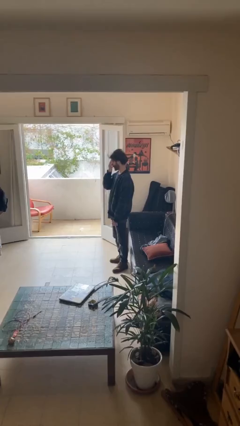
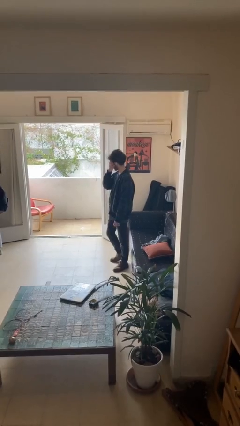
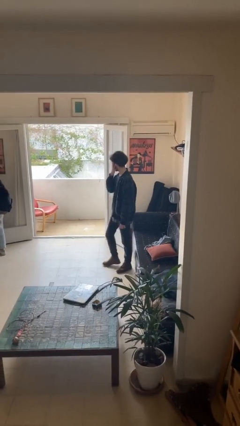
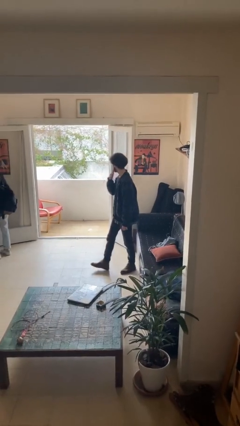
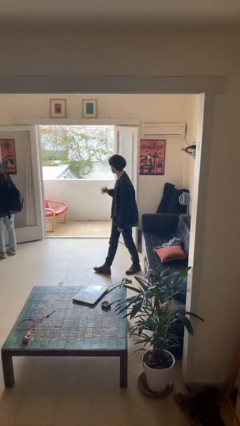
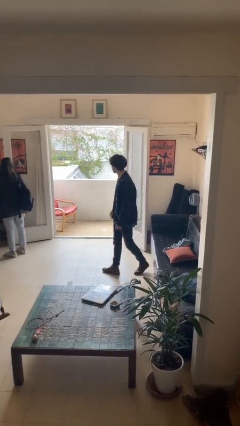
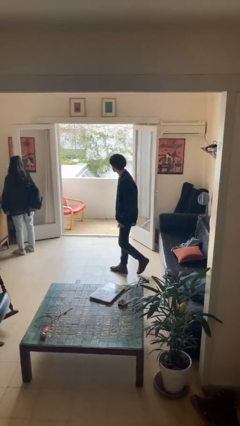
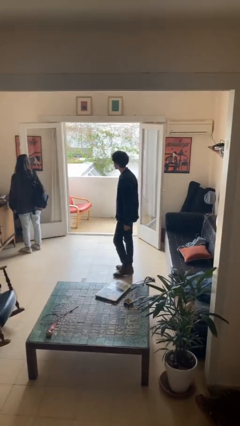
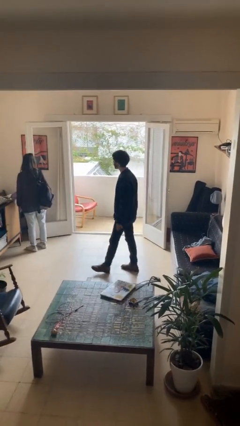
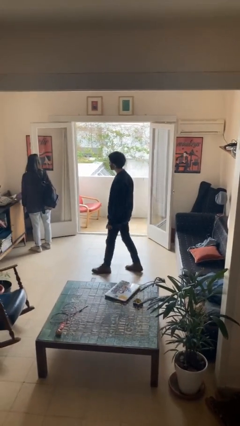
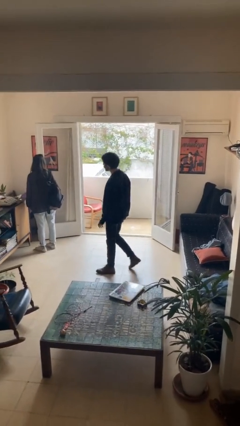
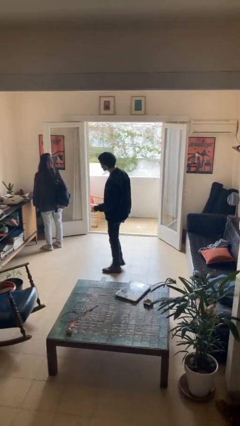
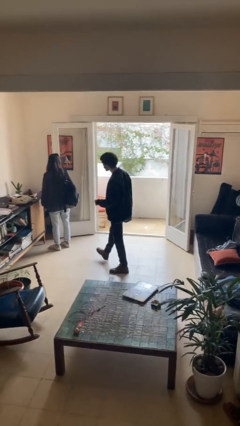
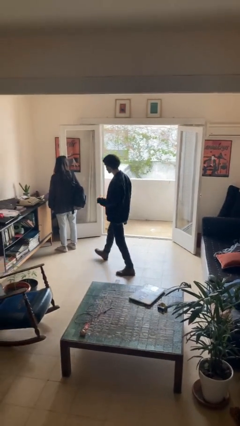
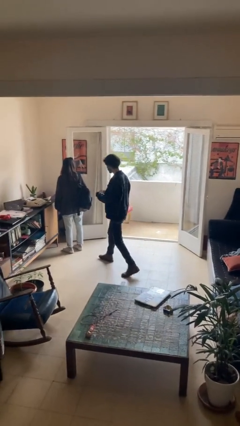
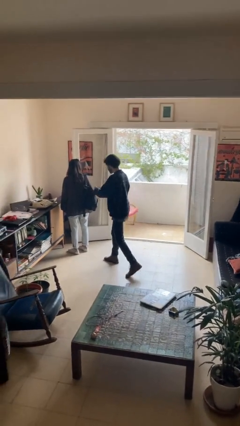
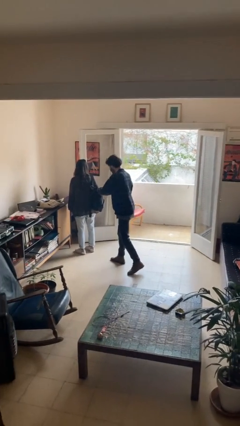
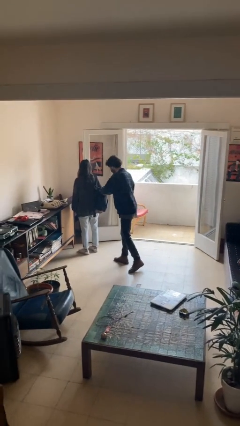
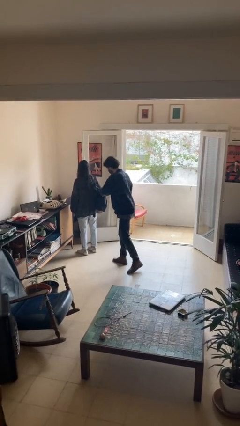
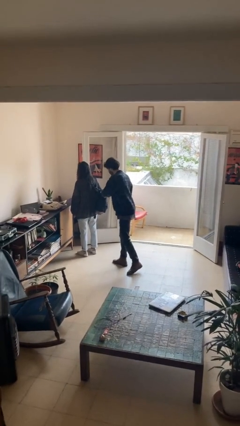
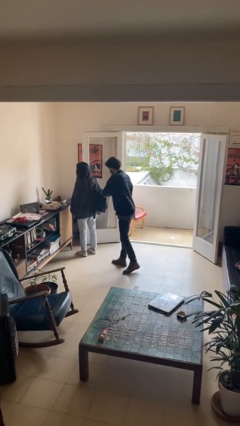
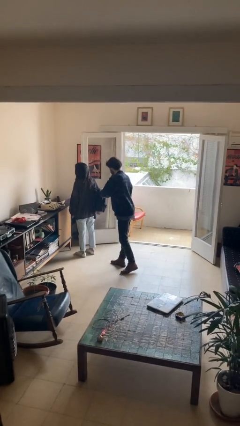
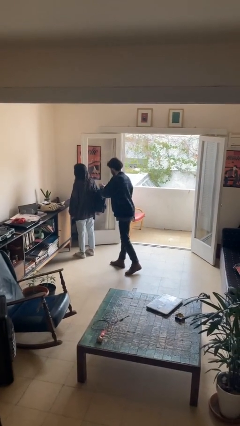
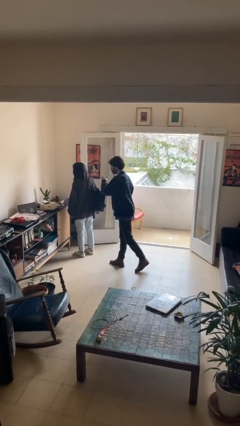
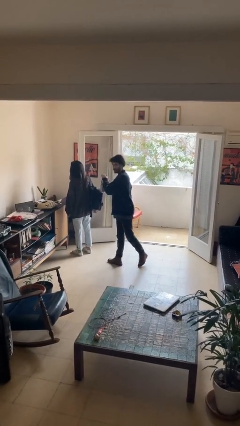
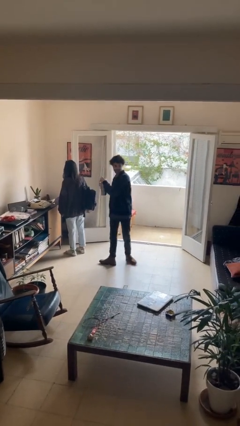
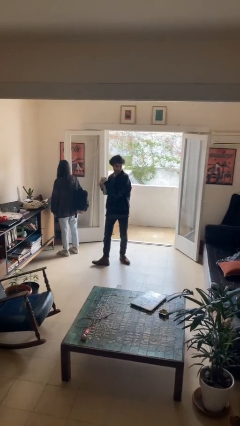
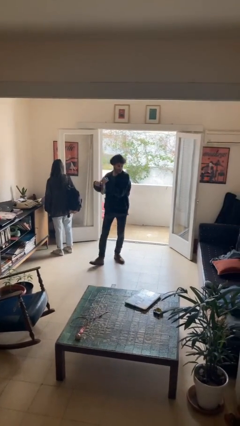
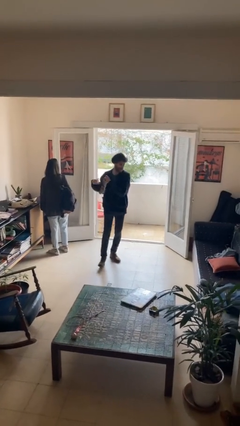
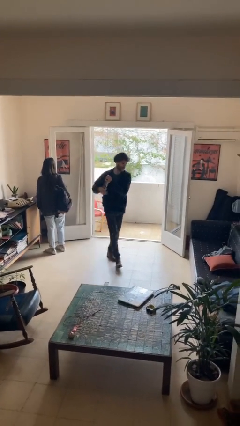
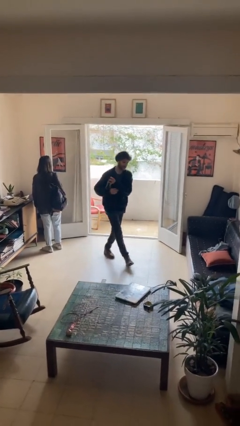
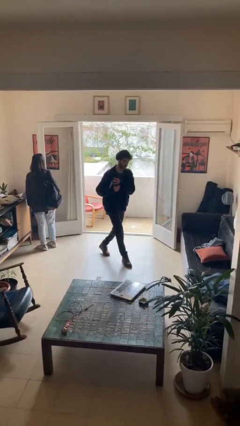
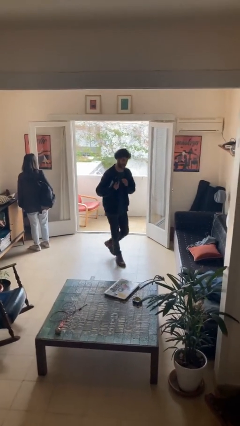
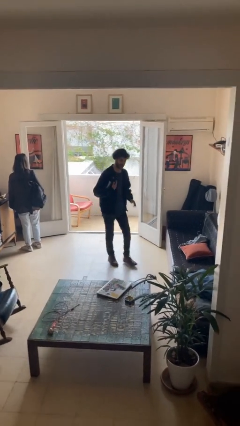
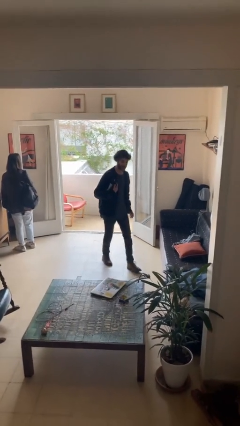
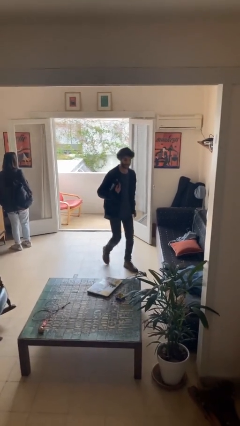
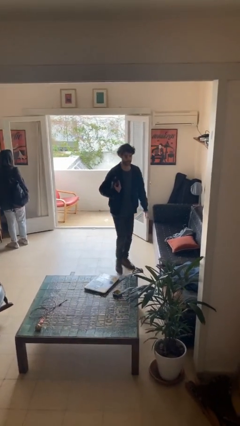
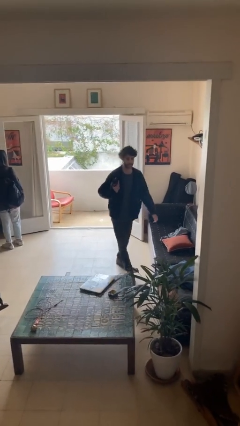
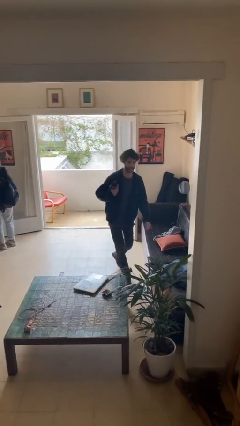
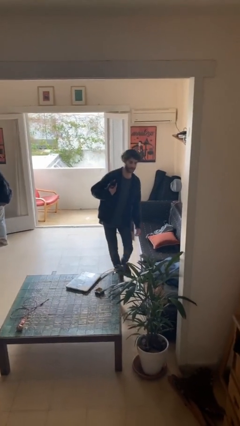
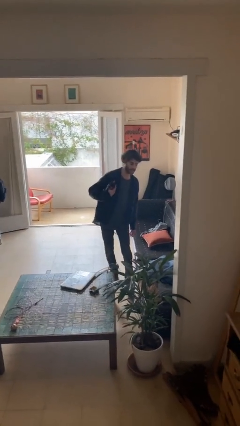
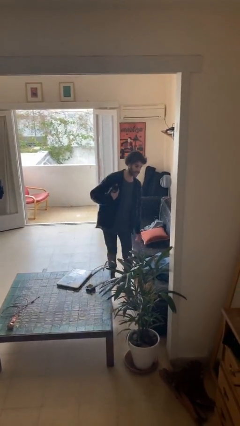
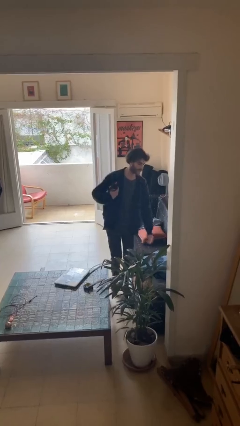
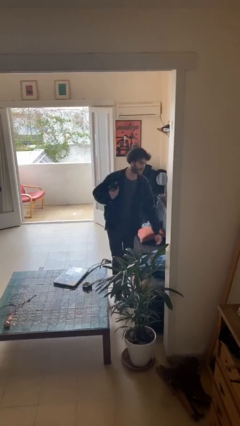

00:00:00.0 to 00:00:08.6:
person steals object from person

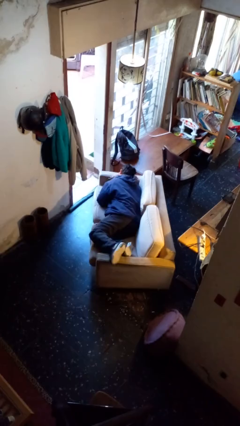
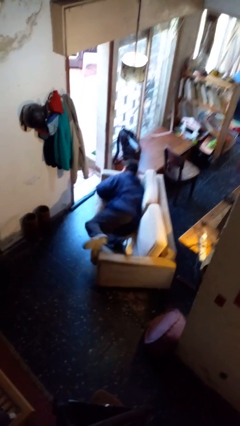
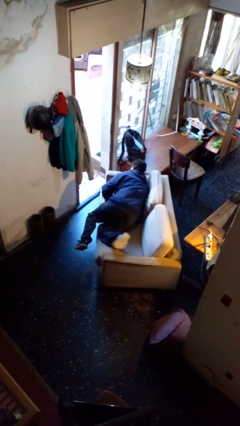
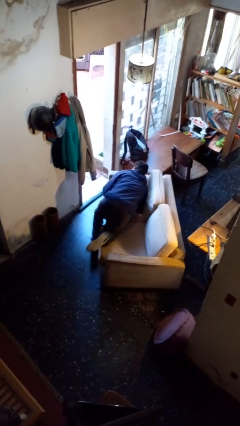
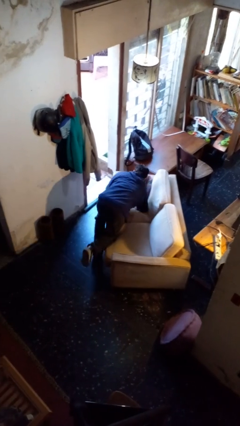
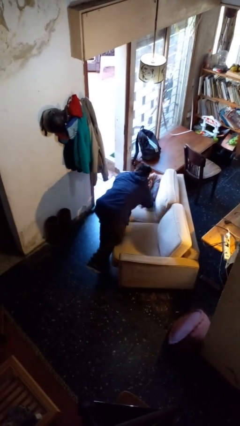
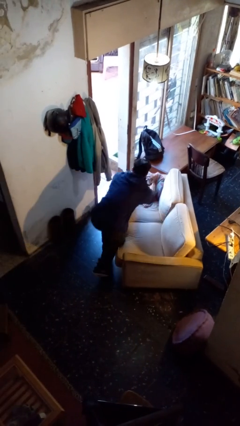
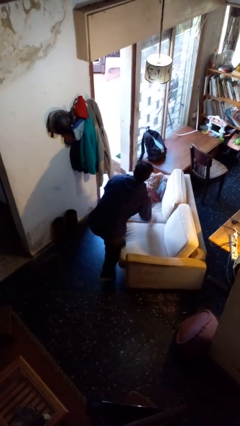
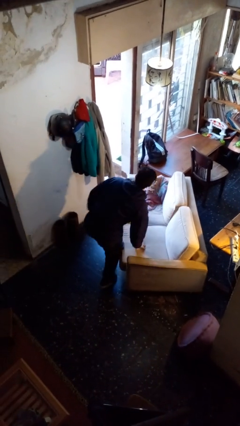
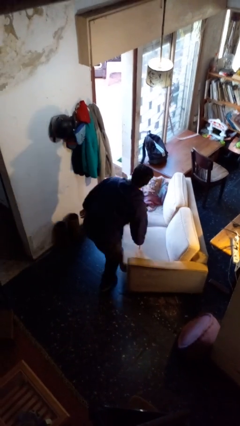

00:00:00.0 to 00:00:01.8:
person stands up

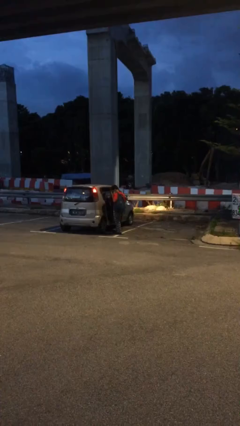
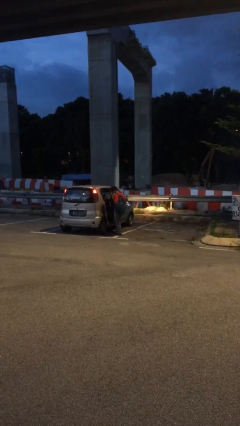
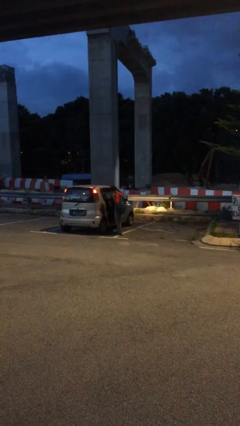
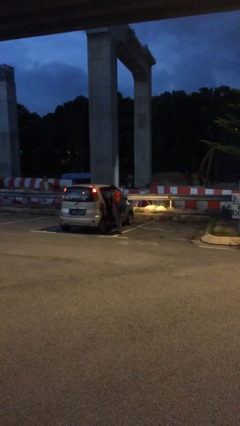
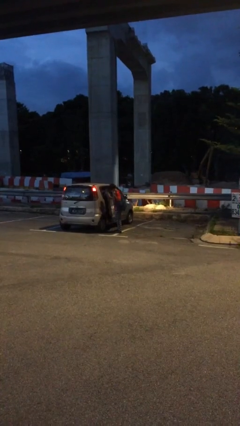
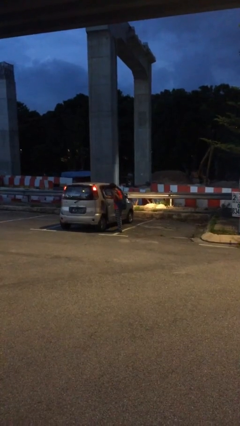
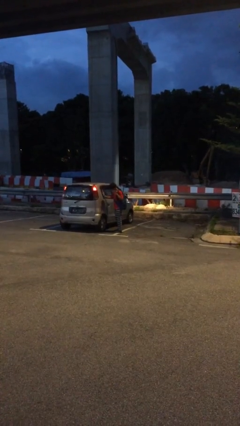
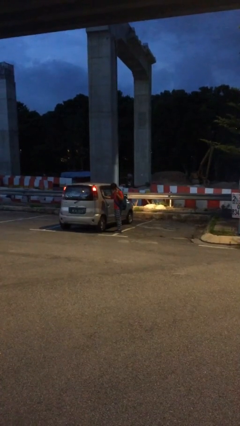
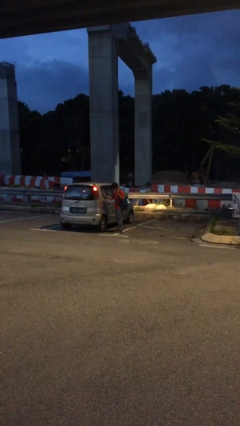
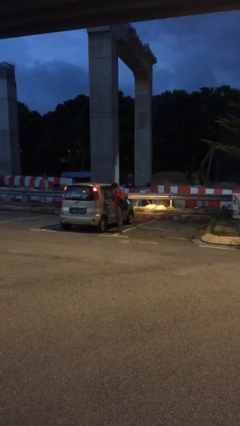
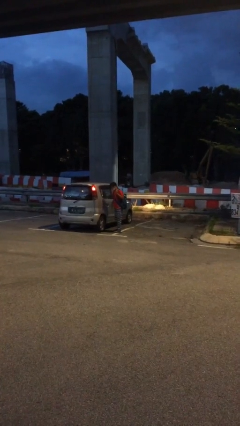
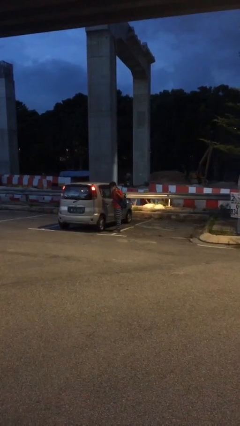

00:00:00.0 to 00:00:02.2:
person closes car door

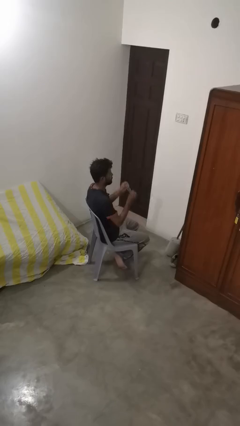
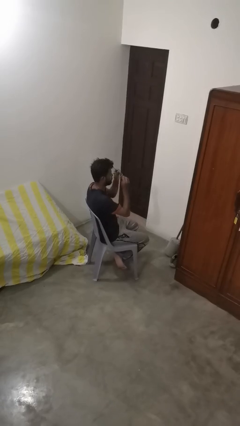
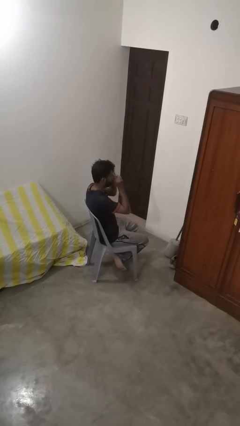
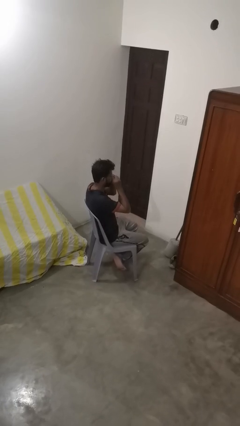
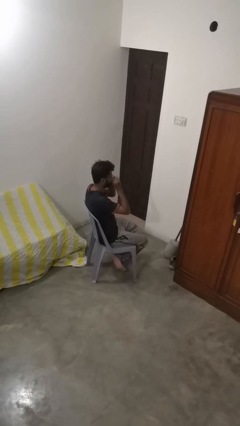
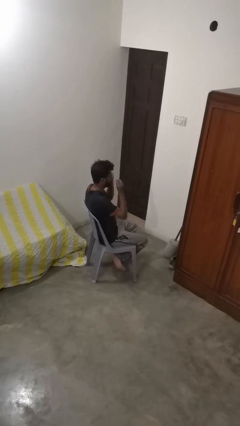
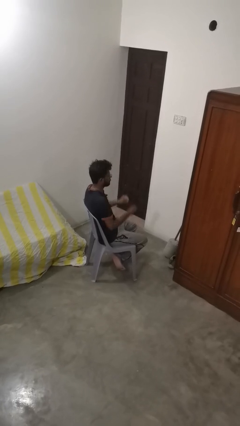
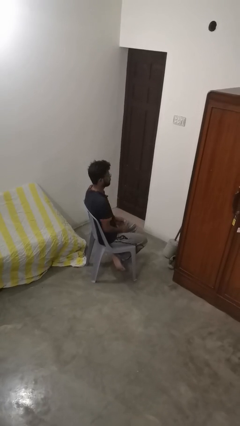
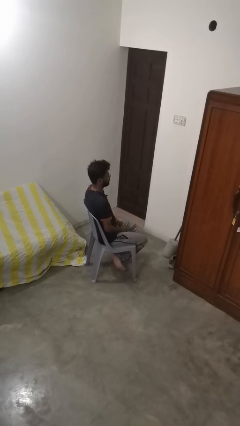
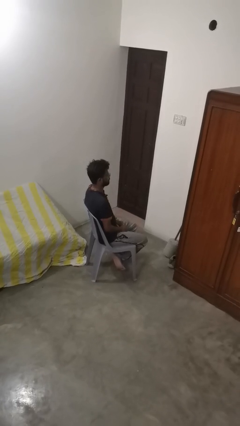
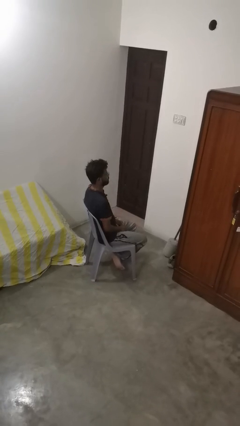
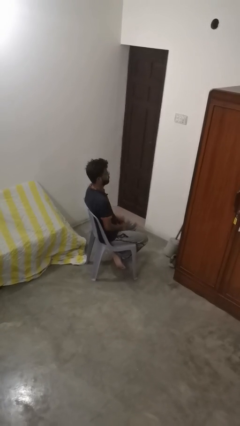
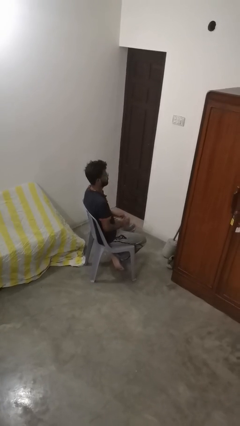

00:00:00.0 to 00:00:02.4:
person puts on glasses

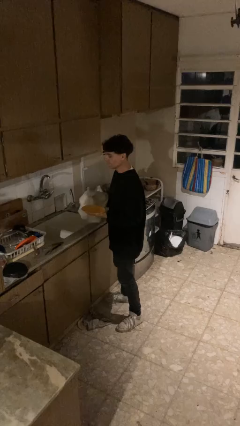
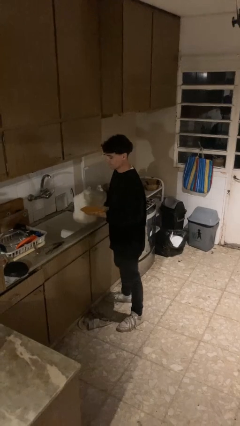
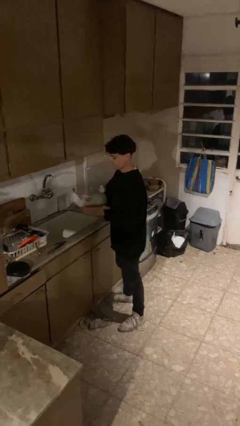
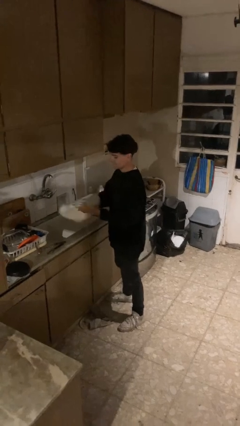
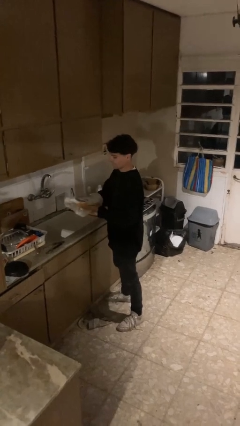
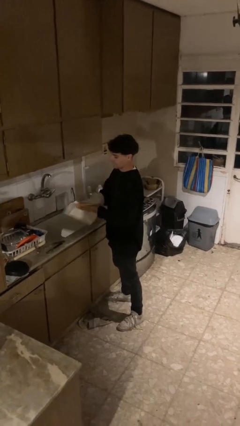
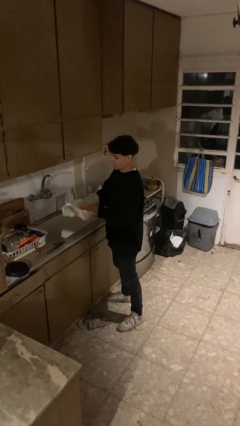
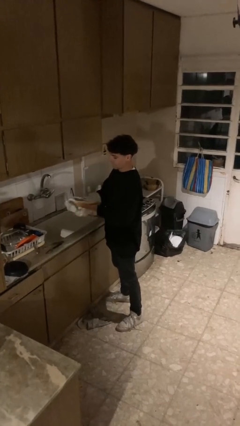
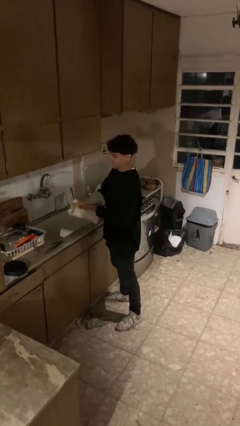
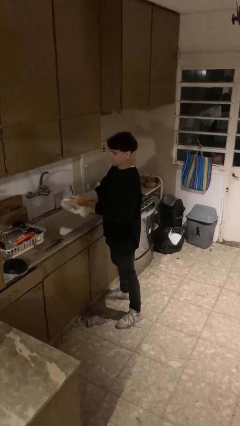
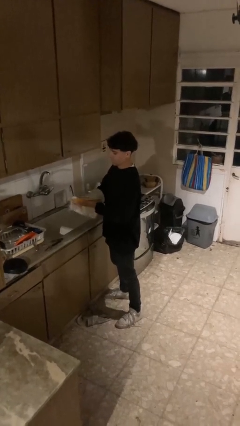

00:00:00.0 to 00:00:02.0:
person dries dish

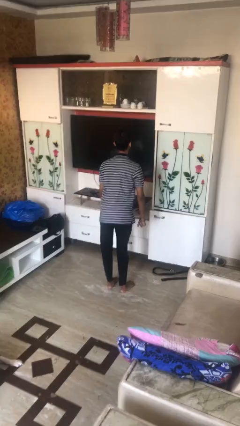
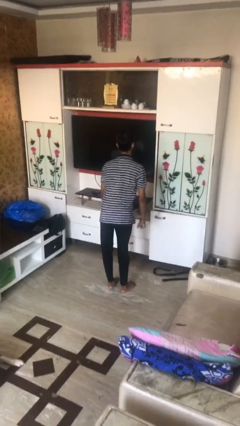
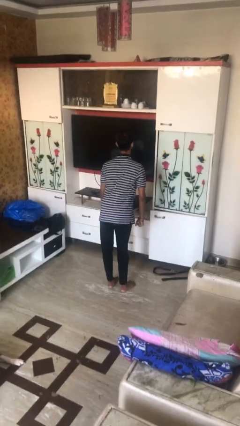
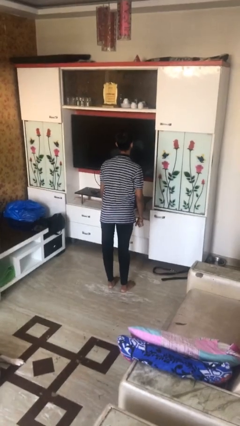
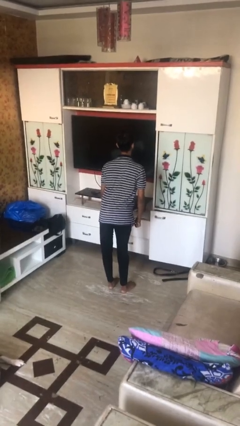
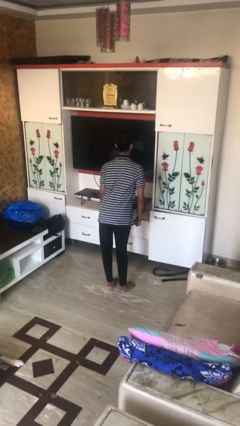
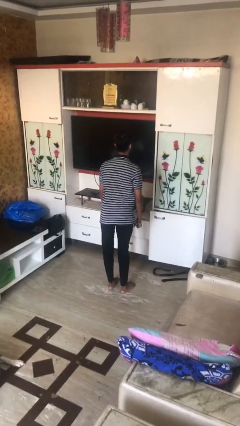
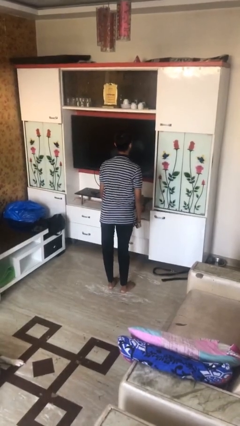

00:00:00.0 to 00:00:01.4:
person wiggles hips
